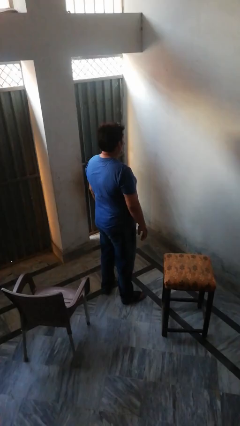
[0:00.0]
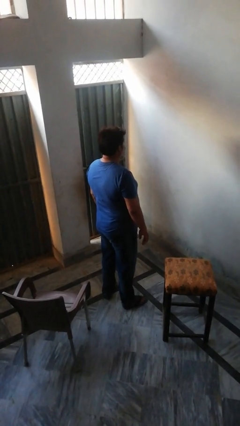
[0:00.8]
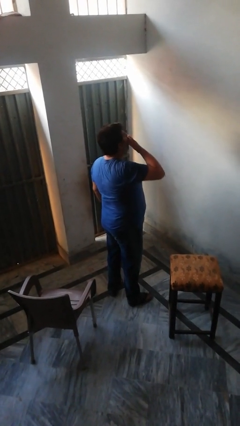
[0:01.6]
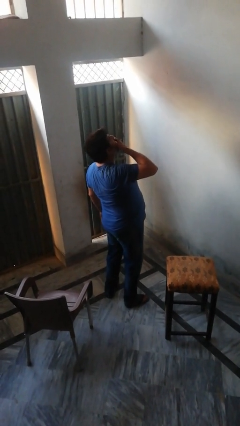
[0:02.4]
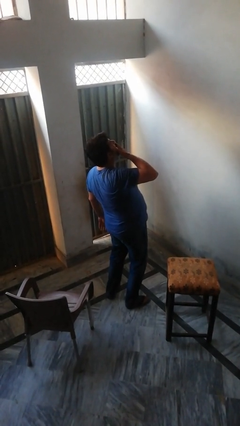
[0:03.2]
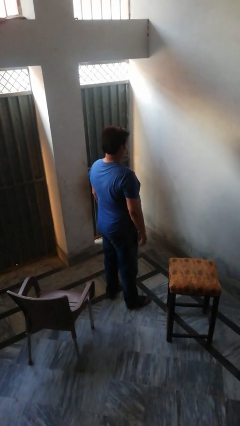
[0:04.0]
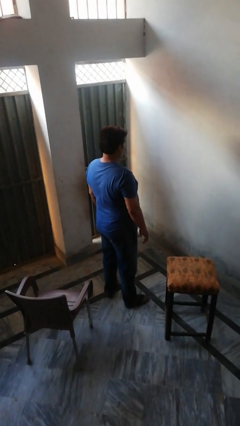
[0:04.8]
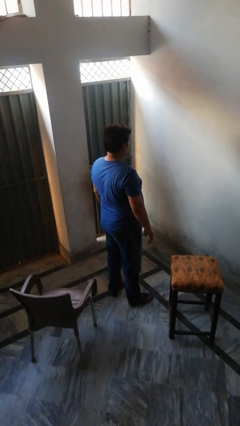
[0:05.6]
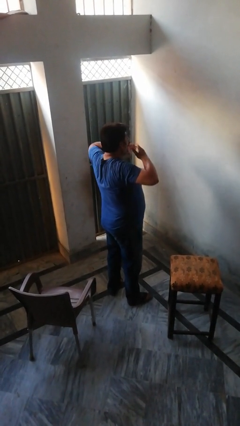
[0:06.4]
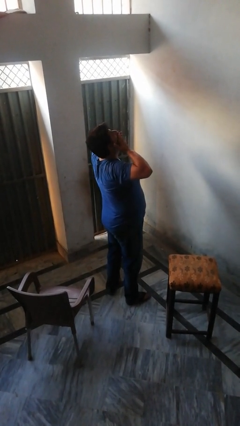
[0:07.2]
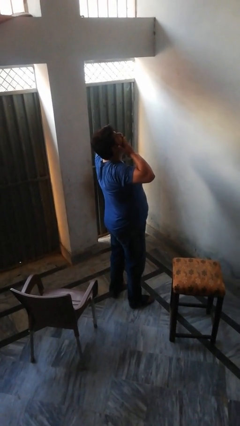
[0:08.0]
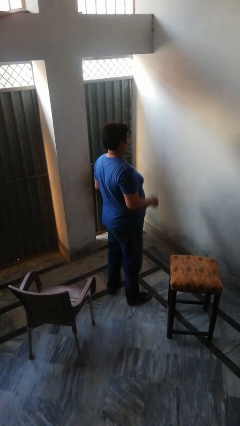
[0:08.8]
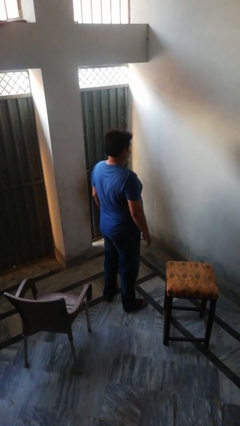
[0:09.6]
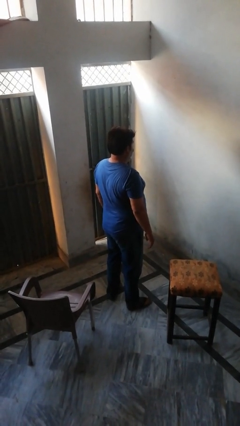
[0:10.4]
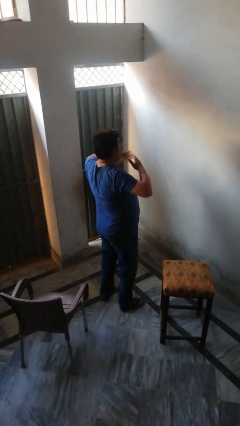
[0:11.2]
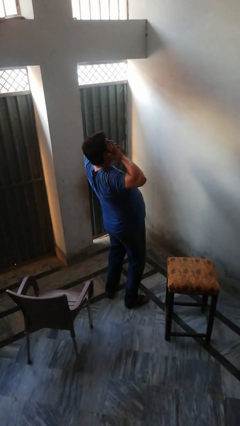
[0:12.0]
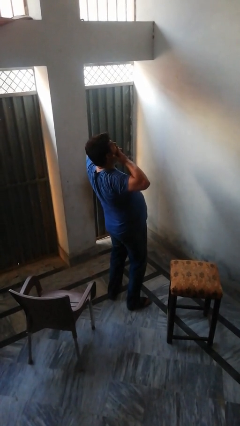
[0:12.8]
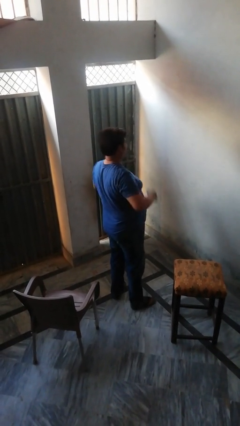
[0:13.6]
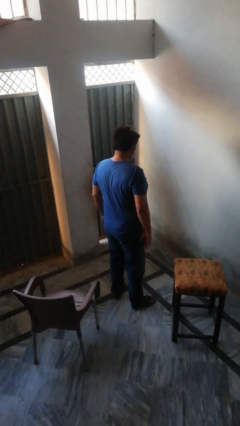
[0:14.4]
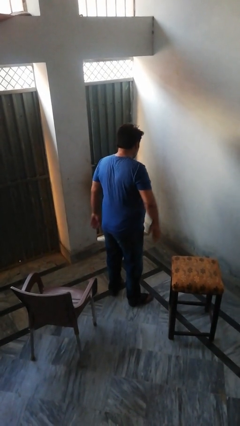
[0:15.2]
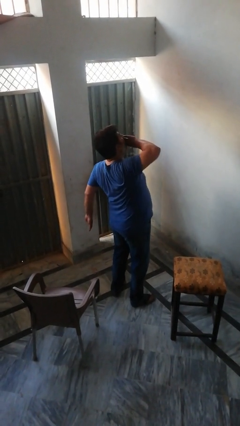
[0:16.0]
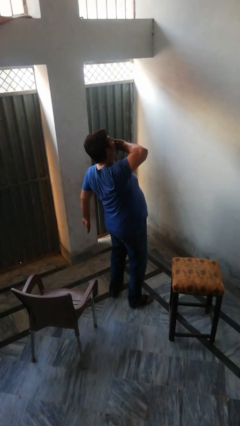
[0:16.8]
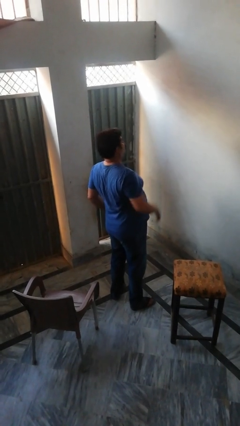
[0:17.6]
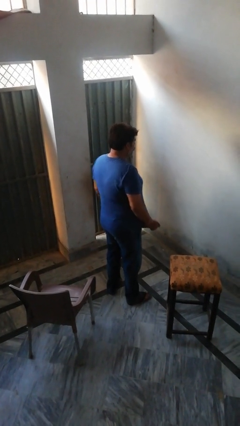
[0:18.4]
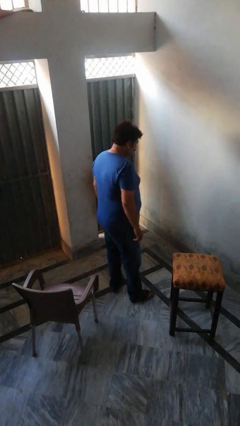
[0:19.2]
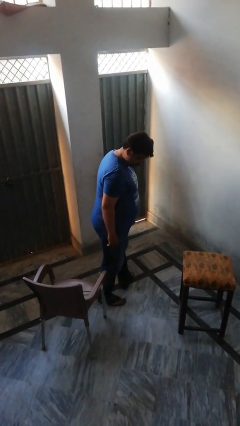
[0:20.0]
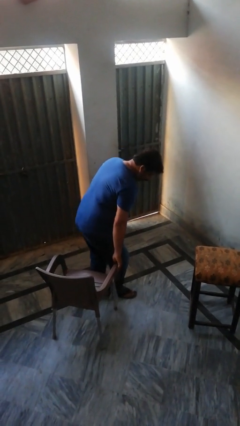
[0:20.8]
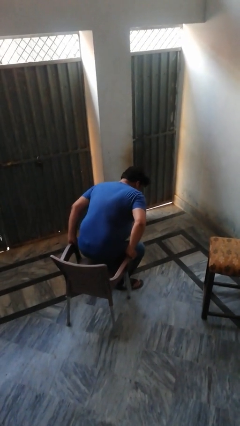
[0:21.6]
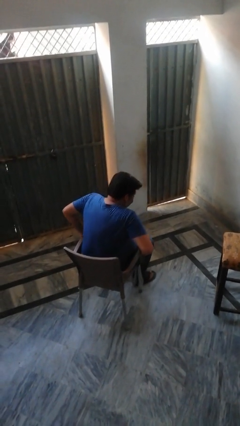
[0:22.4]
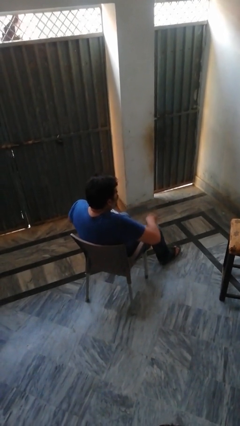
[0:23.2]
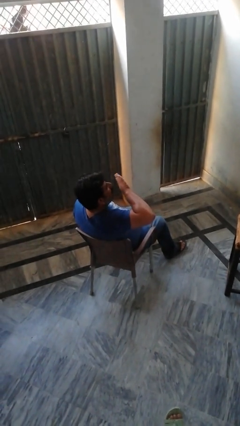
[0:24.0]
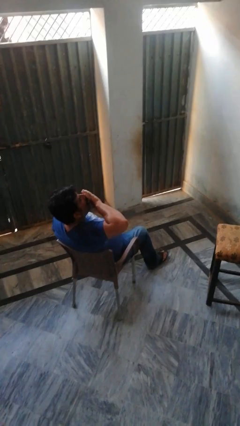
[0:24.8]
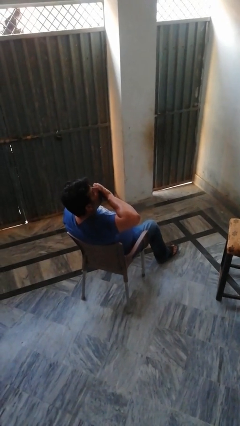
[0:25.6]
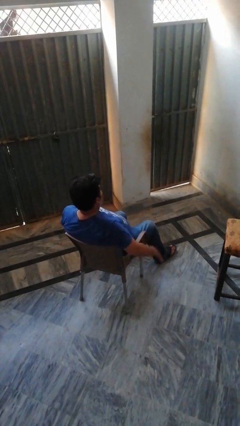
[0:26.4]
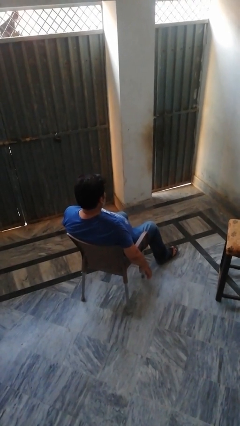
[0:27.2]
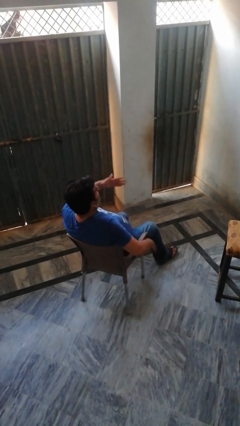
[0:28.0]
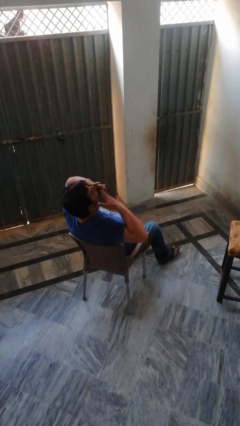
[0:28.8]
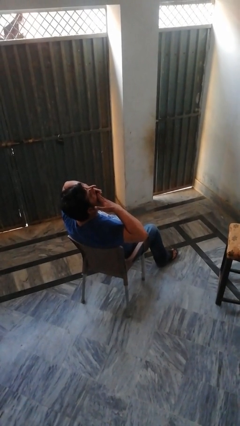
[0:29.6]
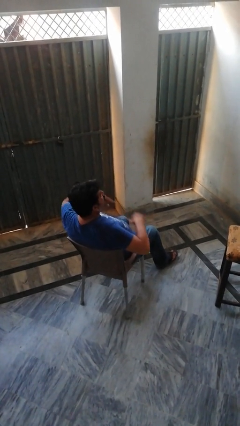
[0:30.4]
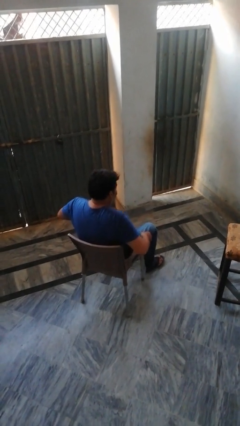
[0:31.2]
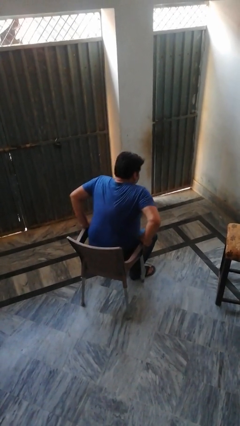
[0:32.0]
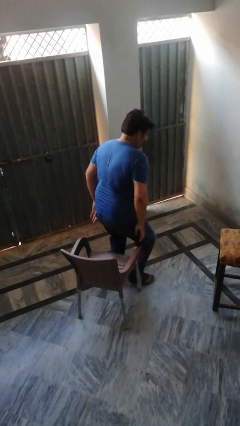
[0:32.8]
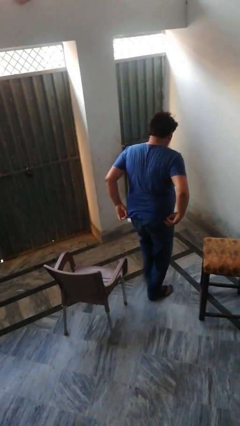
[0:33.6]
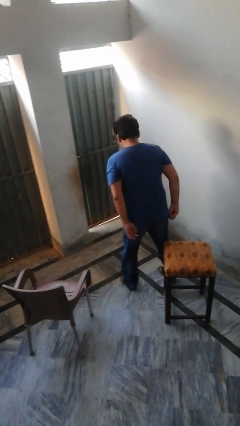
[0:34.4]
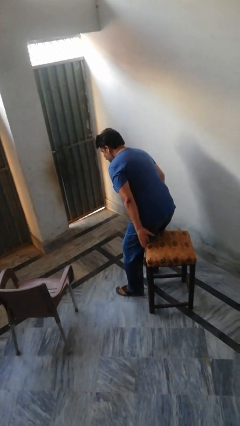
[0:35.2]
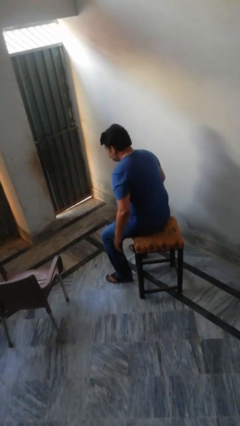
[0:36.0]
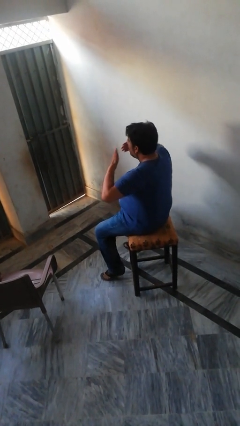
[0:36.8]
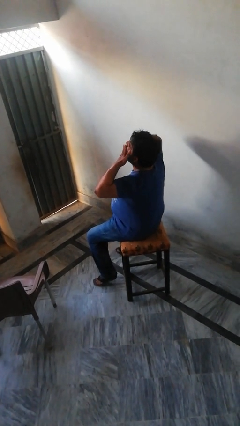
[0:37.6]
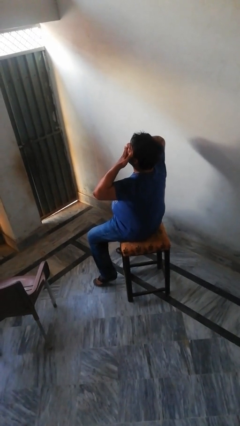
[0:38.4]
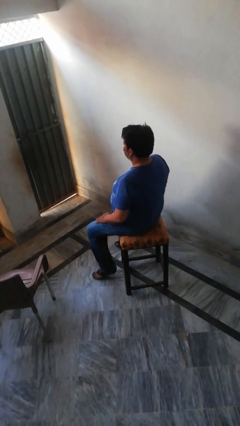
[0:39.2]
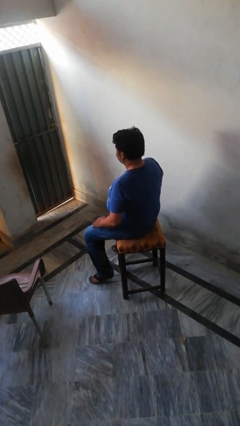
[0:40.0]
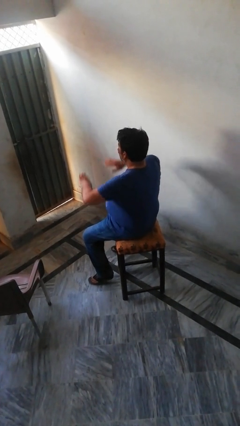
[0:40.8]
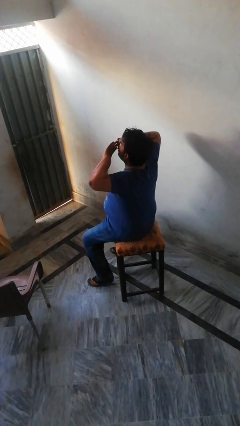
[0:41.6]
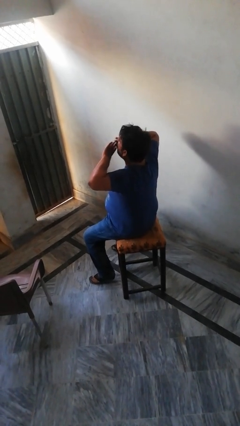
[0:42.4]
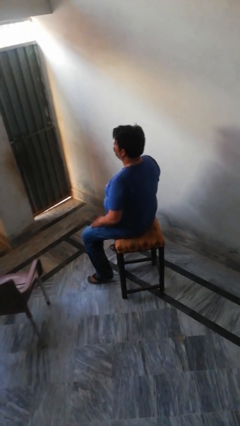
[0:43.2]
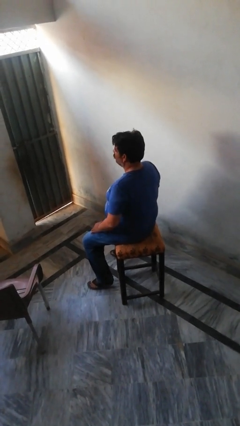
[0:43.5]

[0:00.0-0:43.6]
person yawns

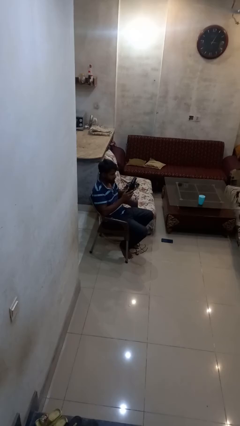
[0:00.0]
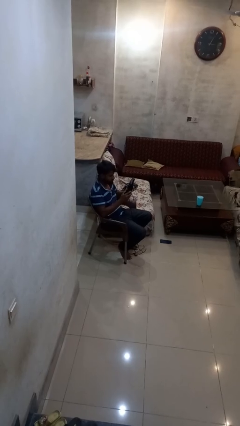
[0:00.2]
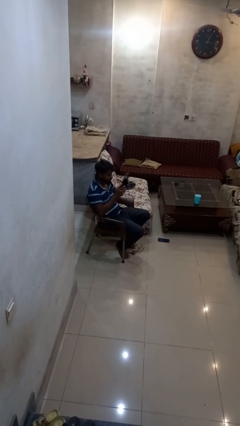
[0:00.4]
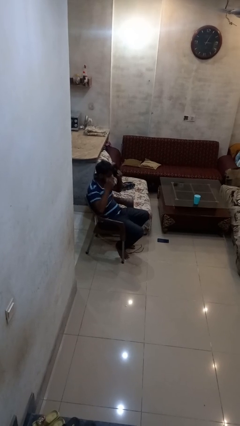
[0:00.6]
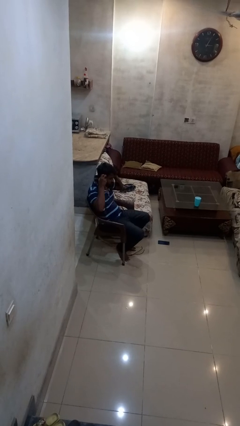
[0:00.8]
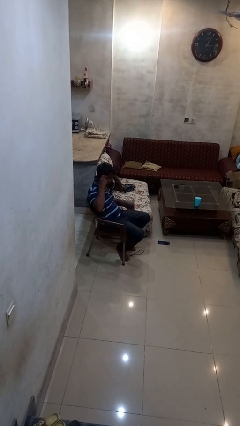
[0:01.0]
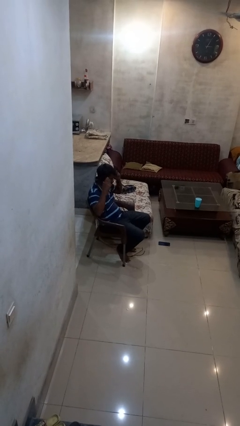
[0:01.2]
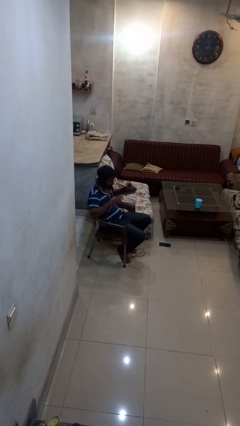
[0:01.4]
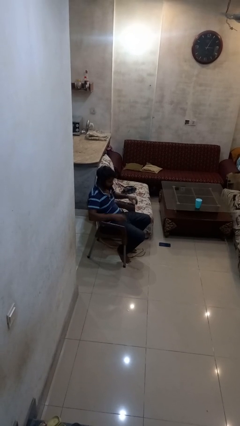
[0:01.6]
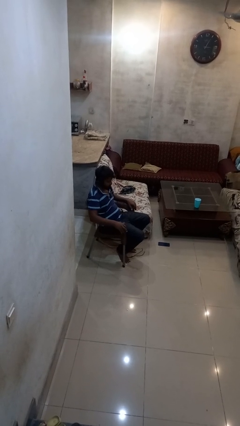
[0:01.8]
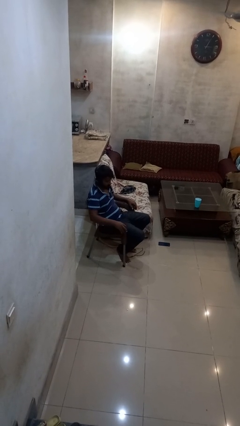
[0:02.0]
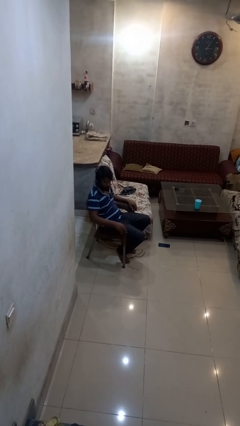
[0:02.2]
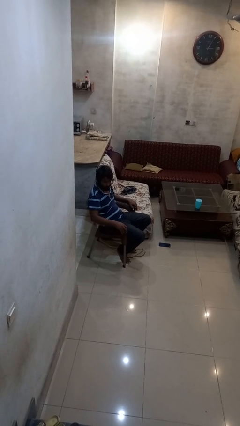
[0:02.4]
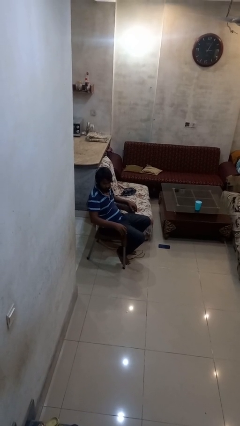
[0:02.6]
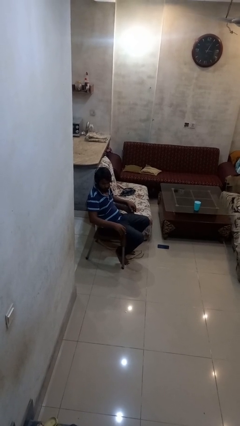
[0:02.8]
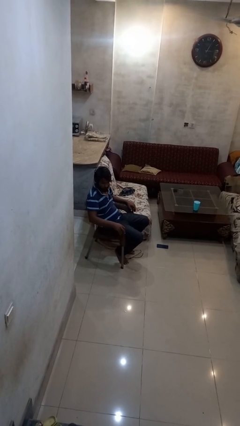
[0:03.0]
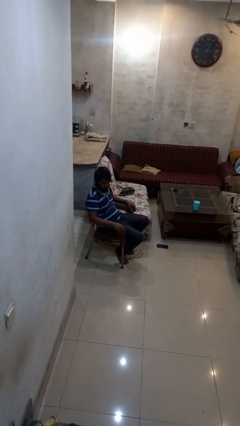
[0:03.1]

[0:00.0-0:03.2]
person puts on headphones

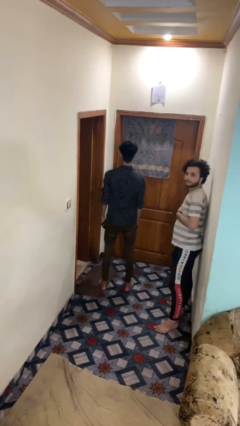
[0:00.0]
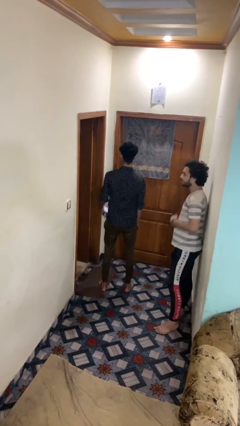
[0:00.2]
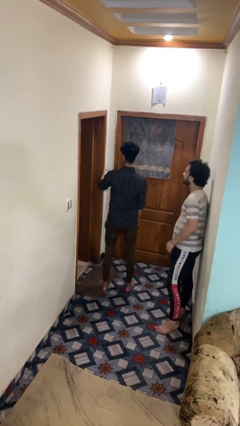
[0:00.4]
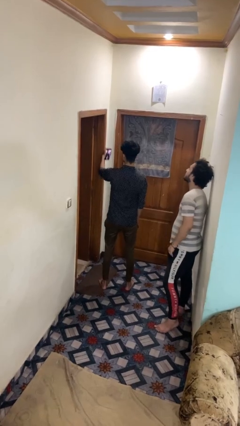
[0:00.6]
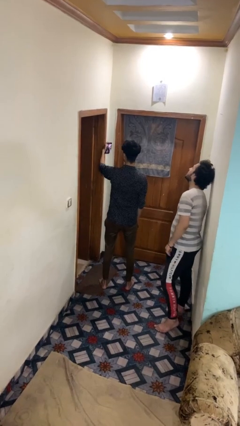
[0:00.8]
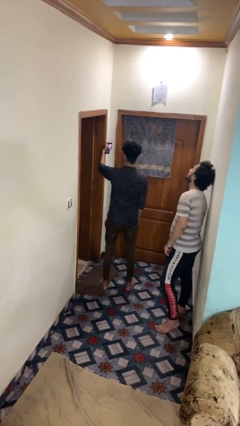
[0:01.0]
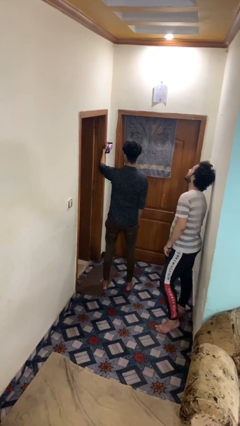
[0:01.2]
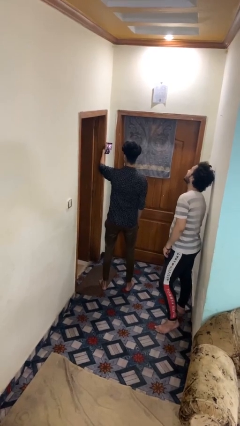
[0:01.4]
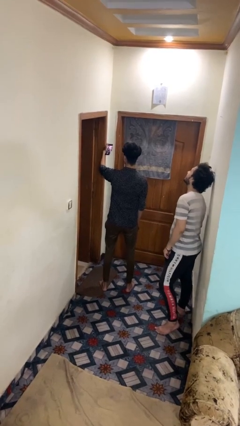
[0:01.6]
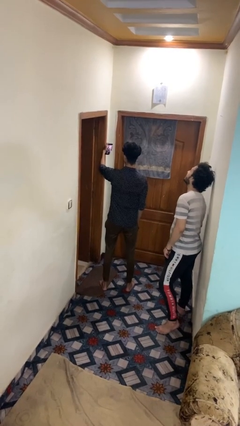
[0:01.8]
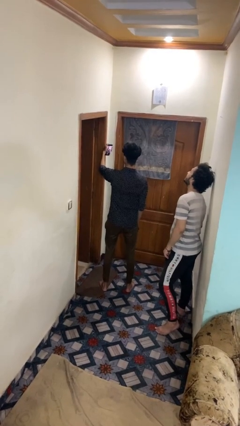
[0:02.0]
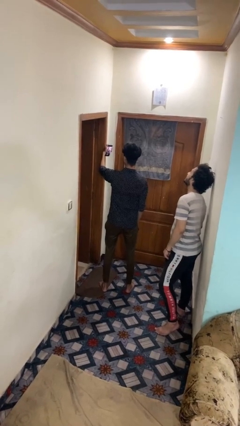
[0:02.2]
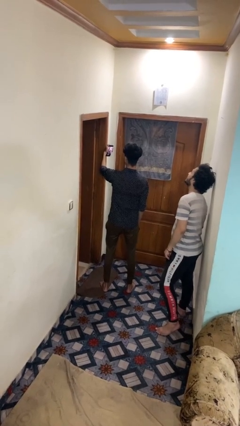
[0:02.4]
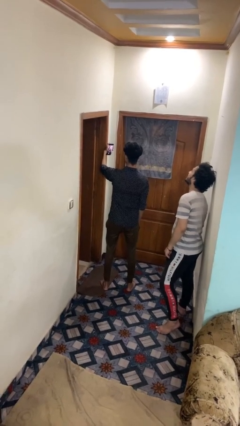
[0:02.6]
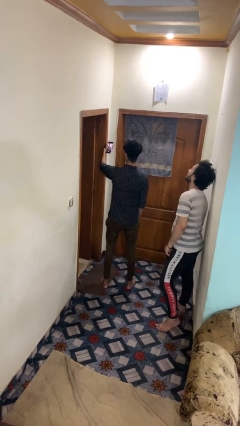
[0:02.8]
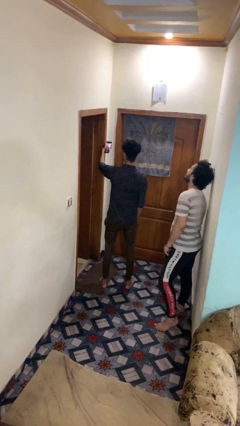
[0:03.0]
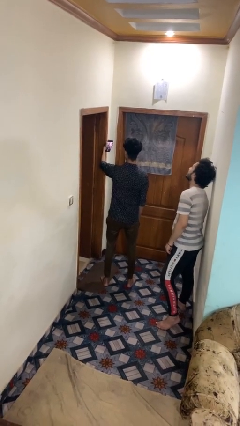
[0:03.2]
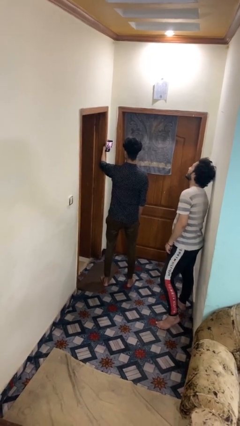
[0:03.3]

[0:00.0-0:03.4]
person takes selfie with person
